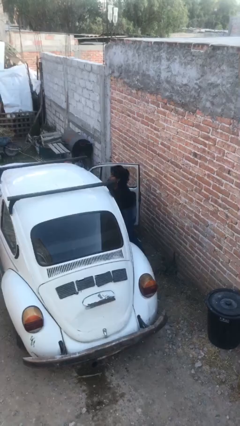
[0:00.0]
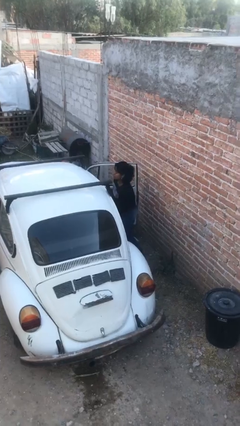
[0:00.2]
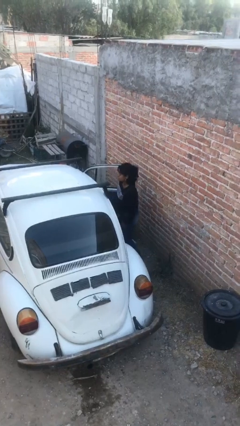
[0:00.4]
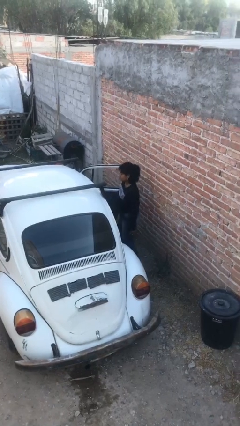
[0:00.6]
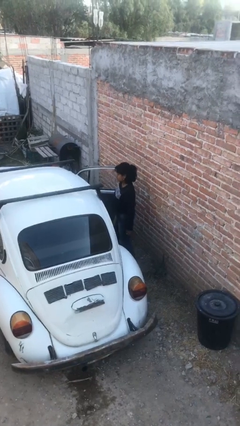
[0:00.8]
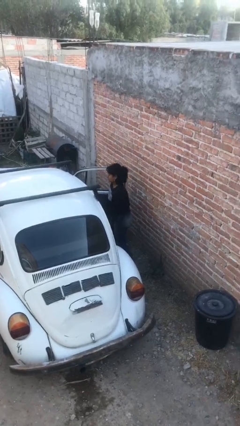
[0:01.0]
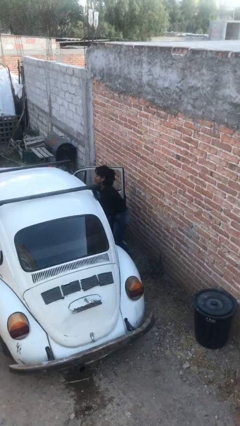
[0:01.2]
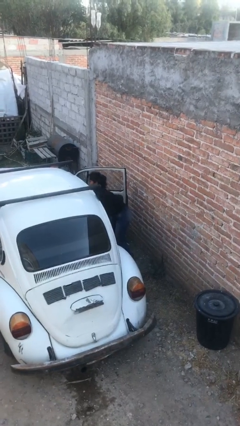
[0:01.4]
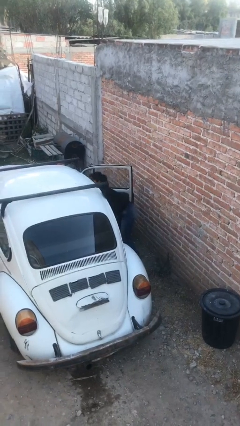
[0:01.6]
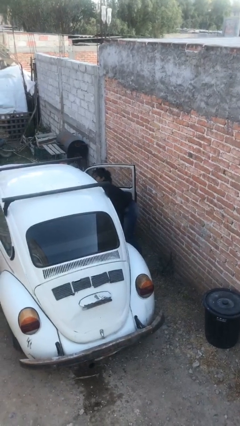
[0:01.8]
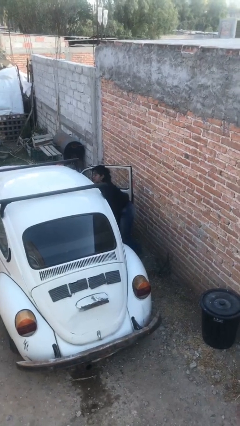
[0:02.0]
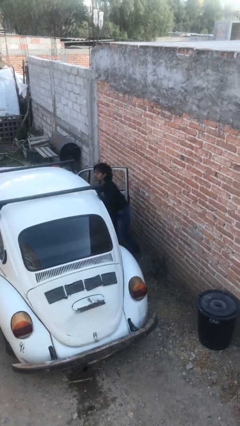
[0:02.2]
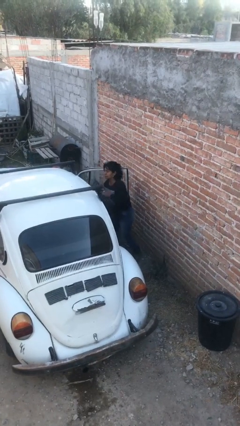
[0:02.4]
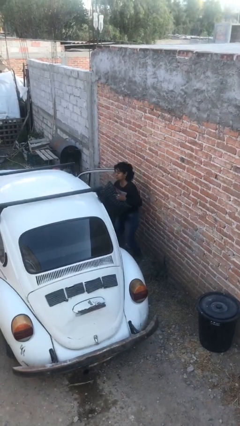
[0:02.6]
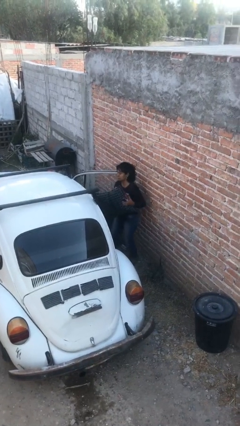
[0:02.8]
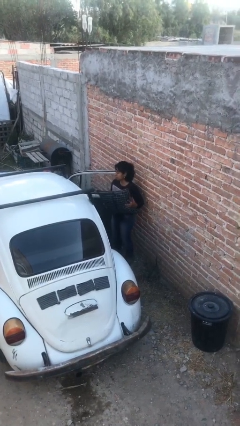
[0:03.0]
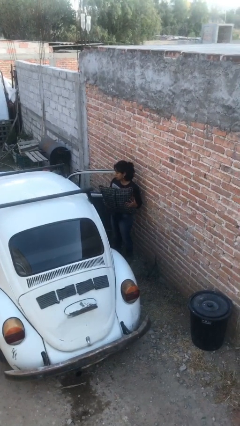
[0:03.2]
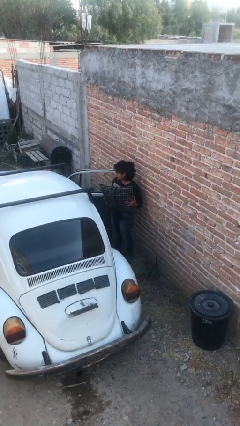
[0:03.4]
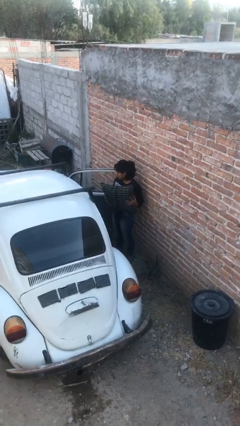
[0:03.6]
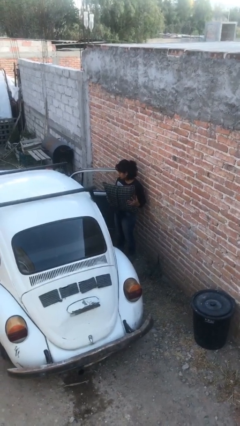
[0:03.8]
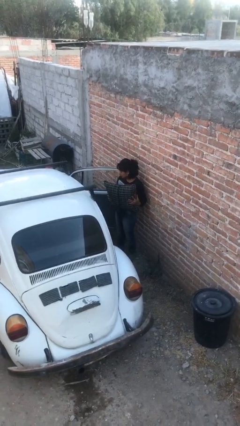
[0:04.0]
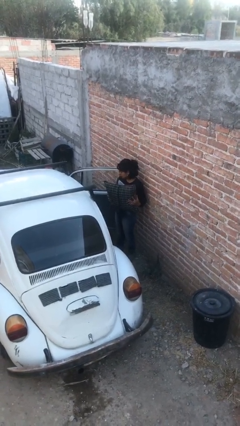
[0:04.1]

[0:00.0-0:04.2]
person unloads car

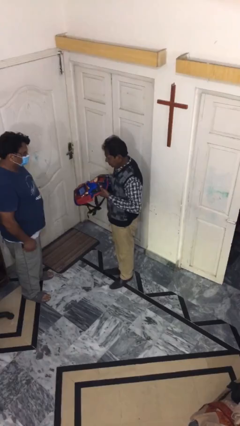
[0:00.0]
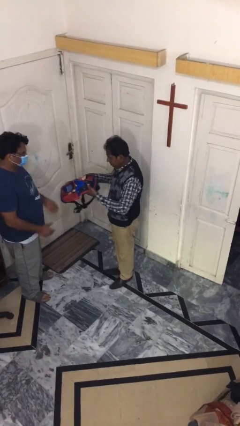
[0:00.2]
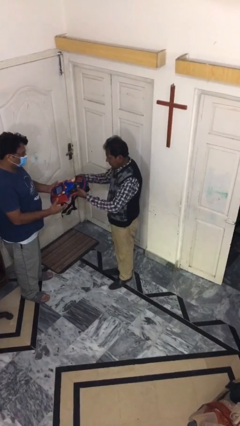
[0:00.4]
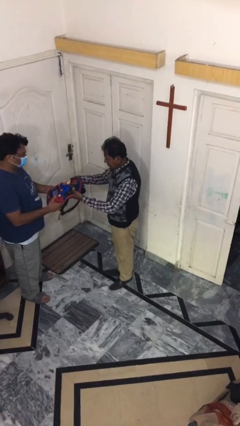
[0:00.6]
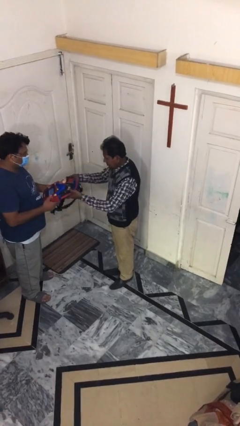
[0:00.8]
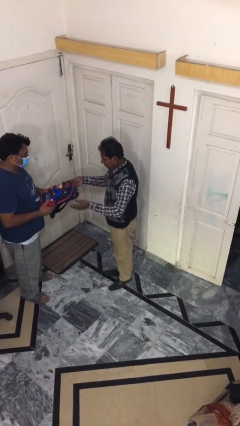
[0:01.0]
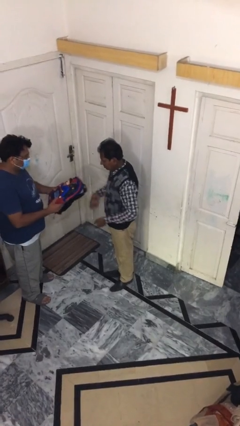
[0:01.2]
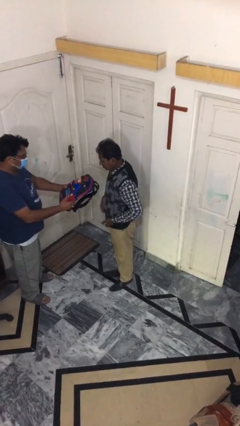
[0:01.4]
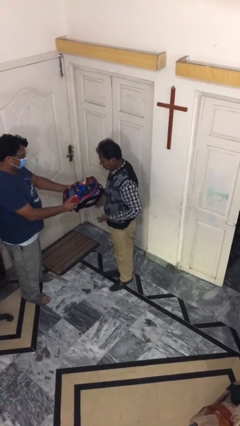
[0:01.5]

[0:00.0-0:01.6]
person transfers object to person

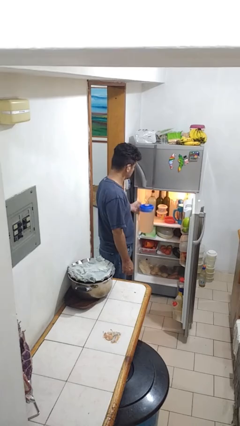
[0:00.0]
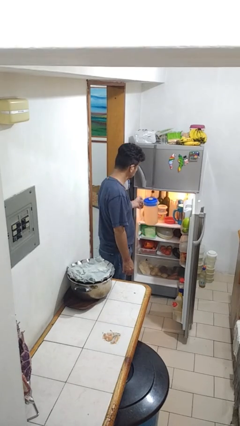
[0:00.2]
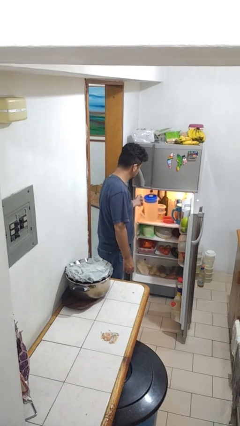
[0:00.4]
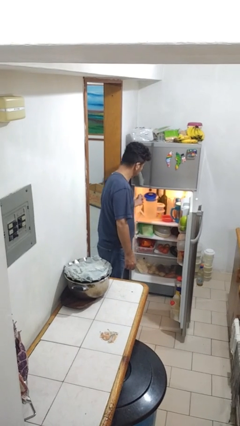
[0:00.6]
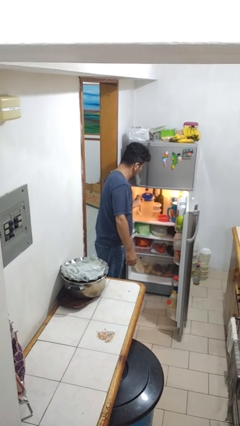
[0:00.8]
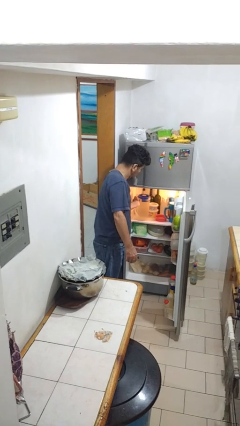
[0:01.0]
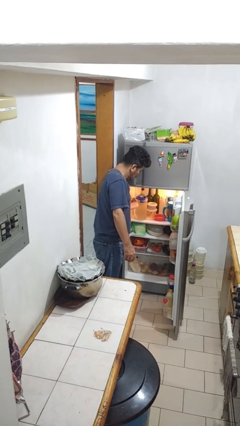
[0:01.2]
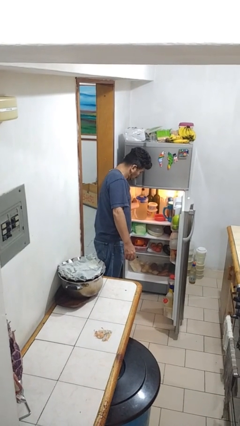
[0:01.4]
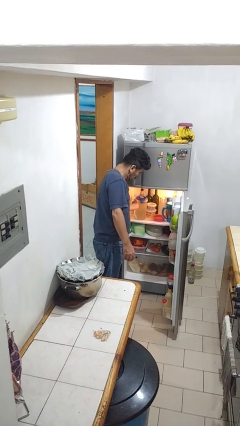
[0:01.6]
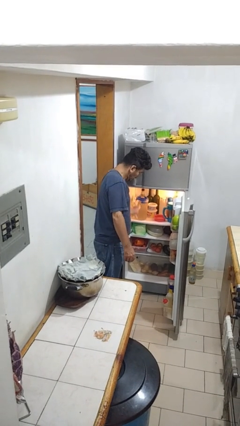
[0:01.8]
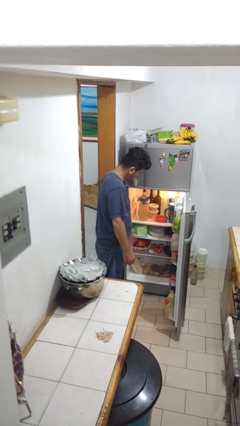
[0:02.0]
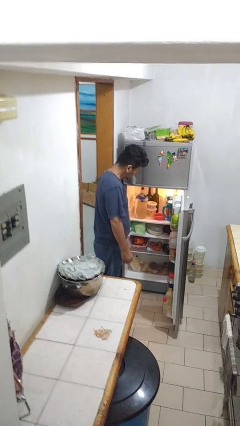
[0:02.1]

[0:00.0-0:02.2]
person puts object into refrigerator

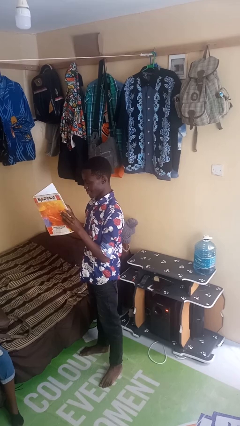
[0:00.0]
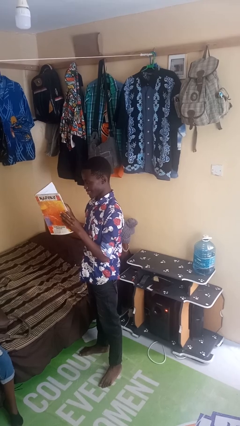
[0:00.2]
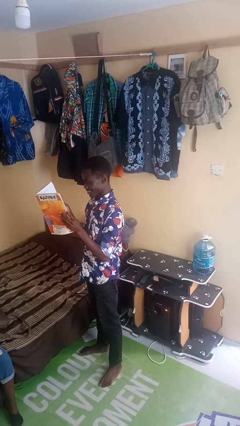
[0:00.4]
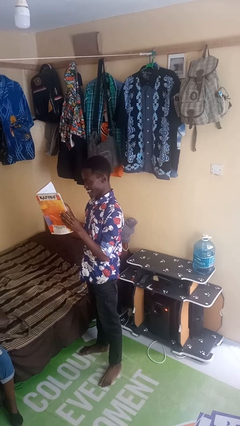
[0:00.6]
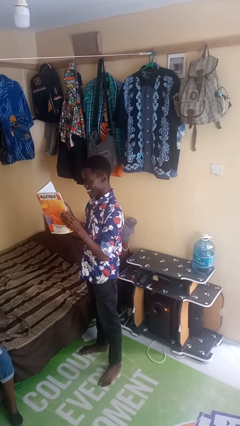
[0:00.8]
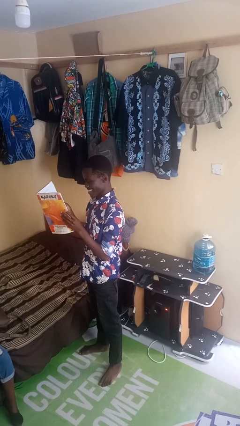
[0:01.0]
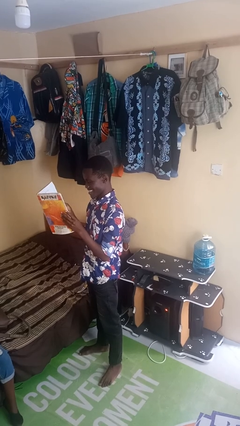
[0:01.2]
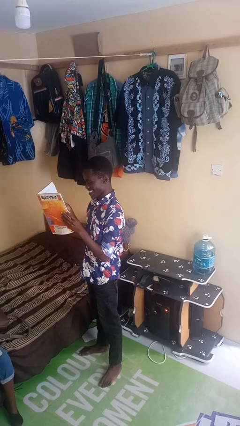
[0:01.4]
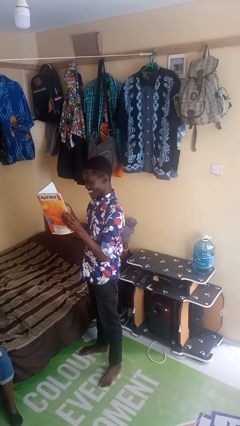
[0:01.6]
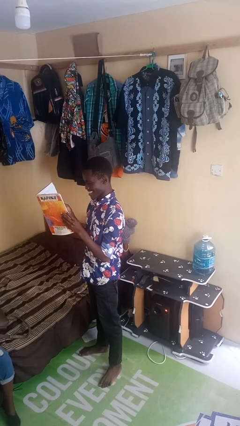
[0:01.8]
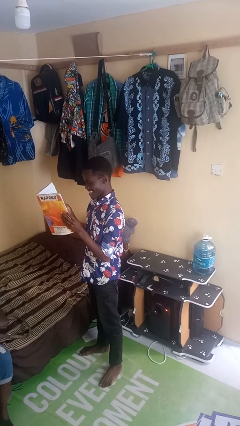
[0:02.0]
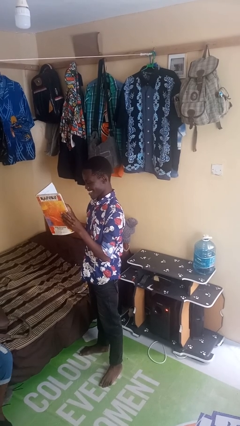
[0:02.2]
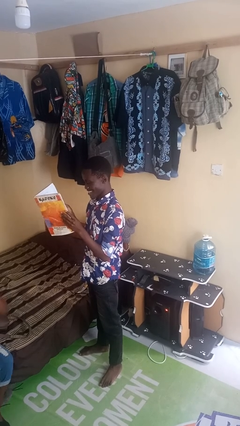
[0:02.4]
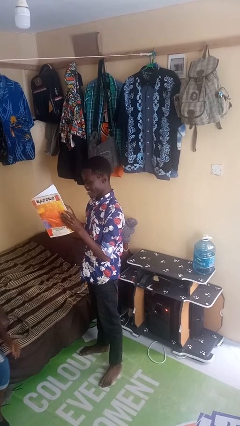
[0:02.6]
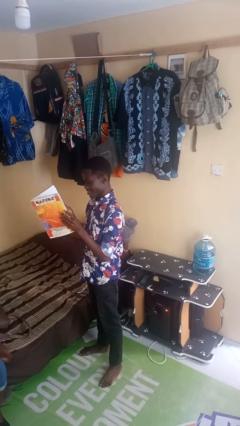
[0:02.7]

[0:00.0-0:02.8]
person reads newspaper

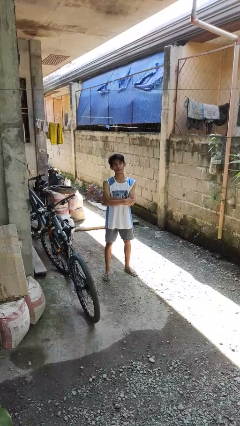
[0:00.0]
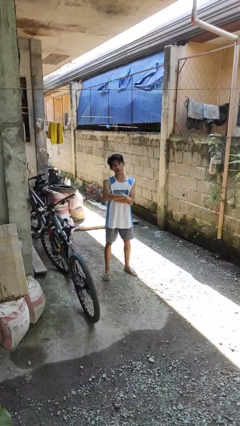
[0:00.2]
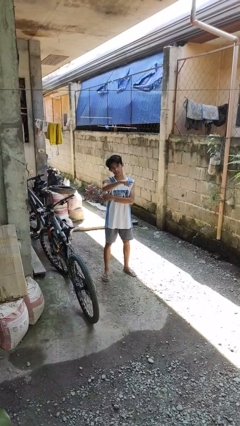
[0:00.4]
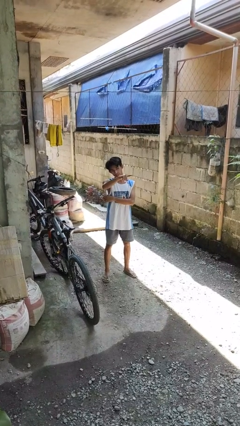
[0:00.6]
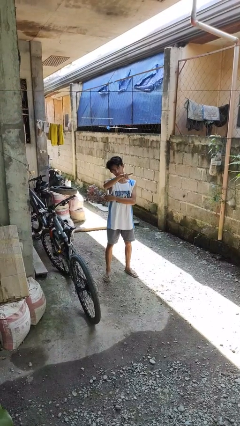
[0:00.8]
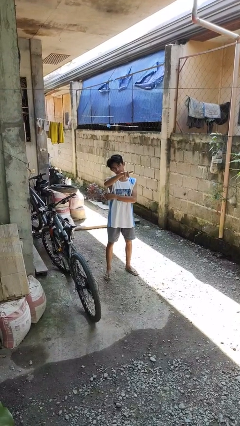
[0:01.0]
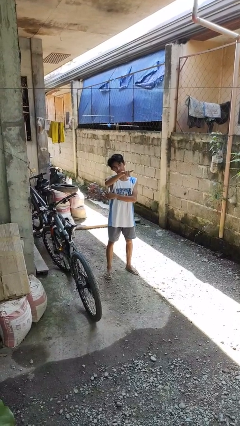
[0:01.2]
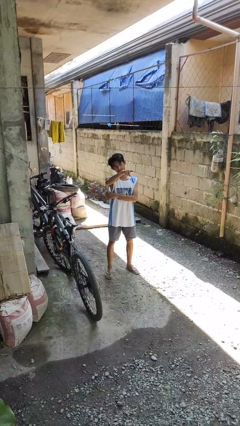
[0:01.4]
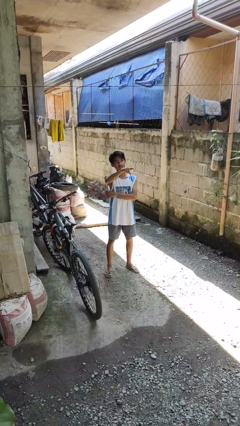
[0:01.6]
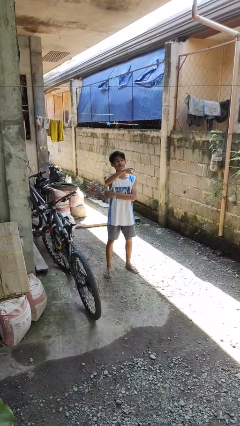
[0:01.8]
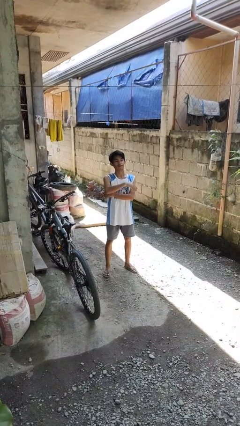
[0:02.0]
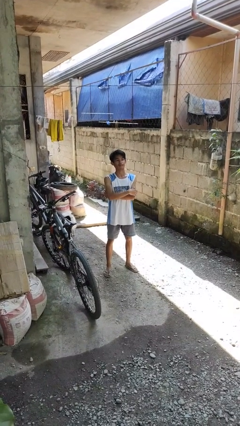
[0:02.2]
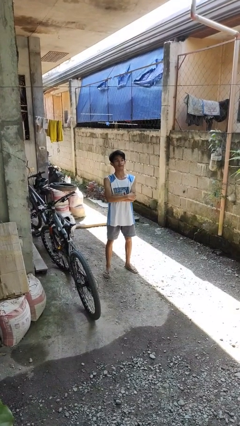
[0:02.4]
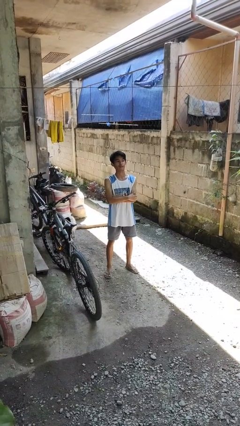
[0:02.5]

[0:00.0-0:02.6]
person points at person

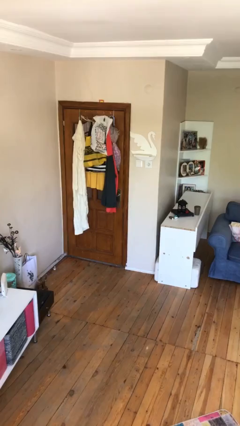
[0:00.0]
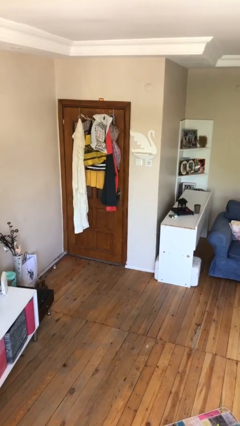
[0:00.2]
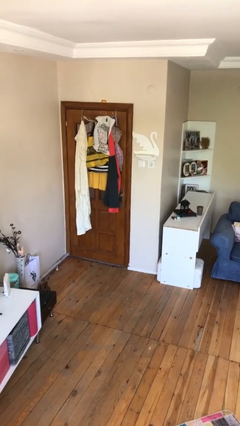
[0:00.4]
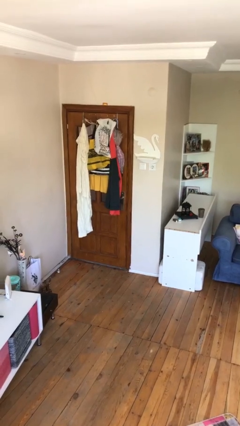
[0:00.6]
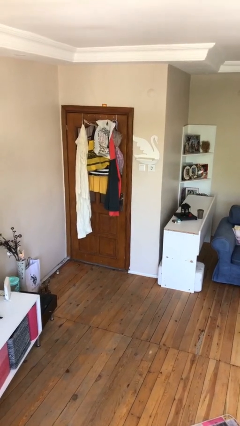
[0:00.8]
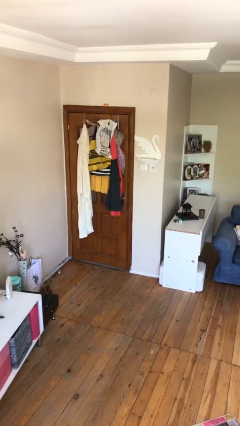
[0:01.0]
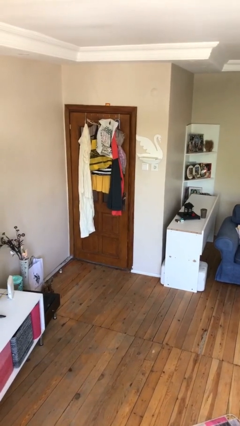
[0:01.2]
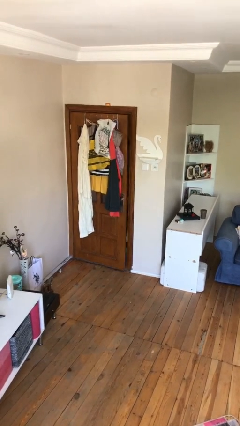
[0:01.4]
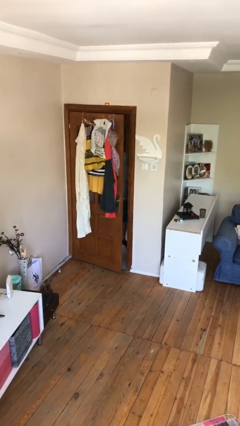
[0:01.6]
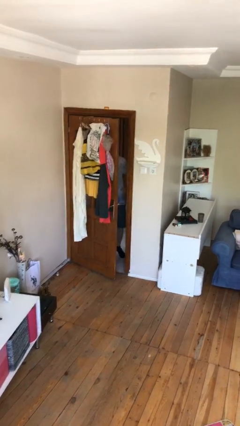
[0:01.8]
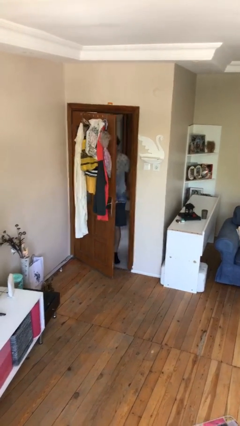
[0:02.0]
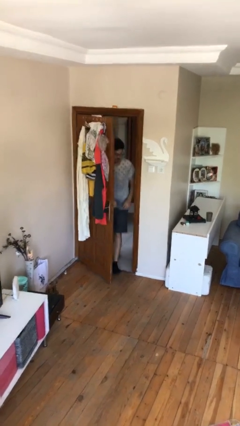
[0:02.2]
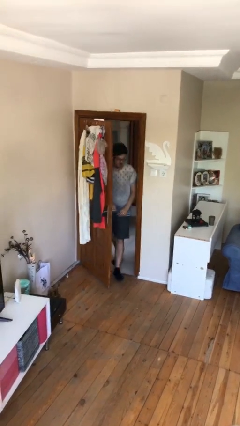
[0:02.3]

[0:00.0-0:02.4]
person opens facility door

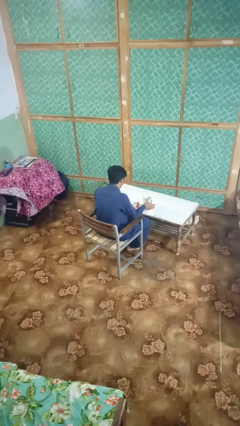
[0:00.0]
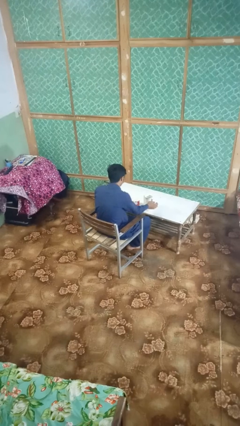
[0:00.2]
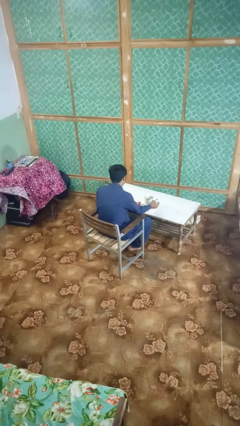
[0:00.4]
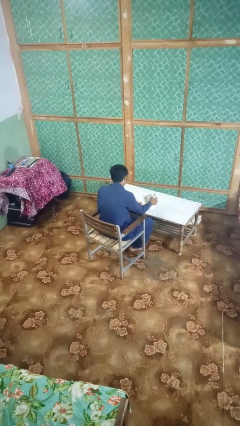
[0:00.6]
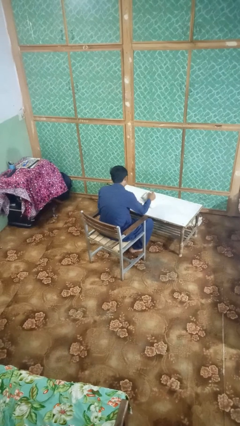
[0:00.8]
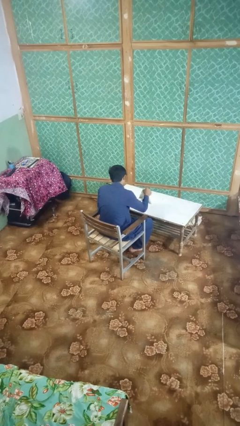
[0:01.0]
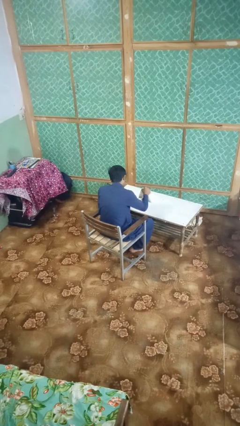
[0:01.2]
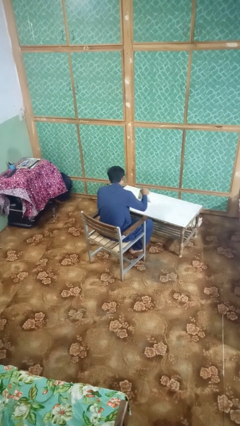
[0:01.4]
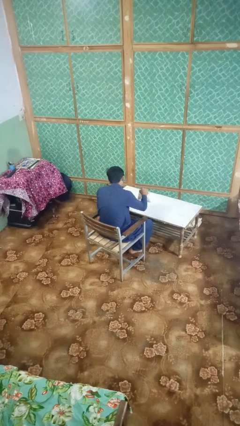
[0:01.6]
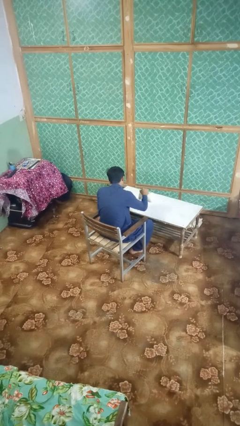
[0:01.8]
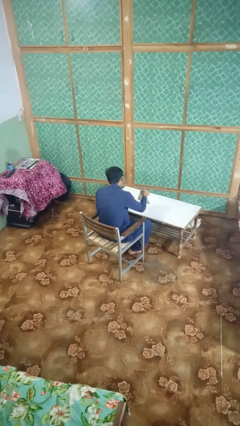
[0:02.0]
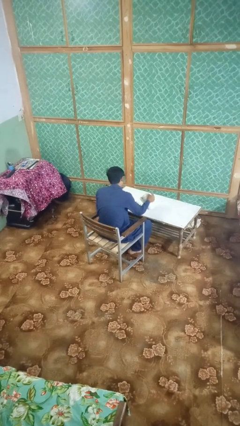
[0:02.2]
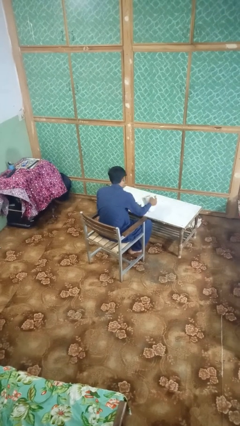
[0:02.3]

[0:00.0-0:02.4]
person pours coffee into mug
